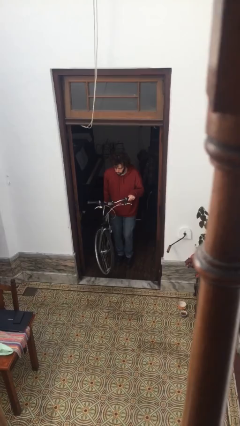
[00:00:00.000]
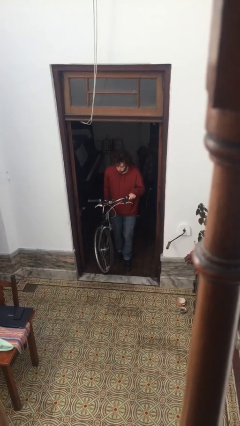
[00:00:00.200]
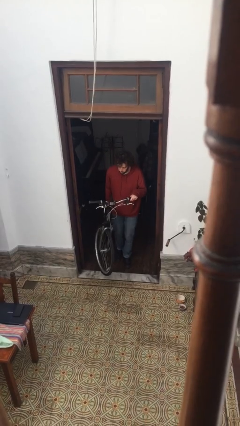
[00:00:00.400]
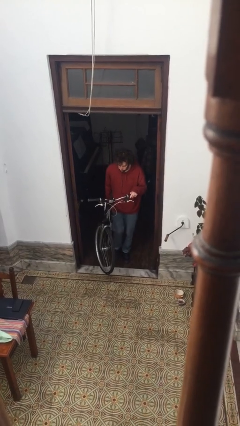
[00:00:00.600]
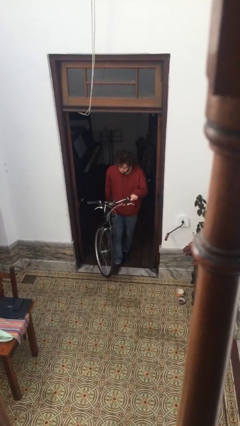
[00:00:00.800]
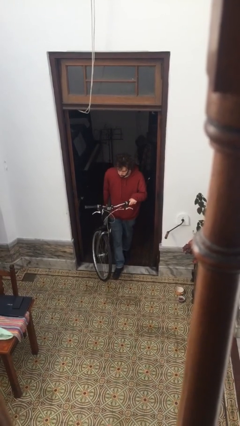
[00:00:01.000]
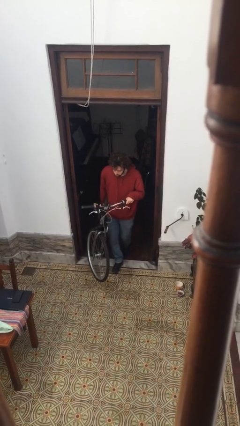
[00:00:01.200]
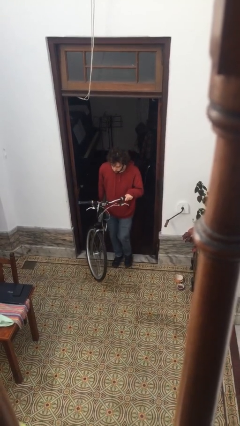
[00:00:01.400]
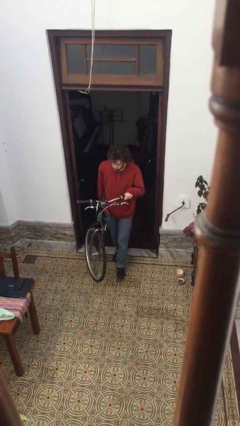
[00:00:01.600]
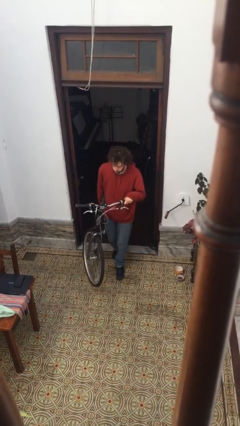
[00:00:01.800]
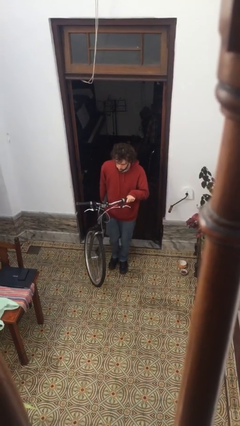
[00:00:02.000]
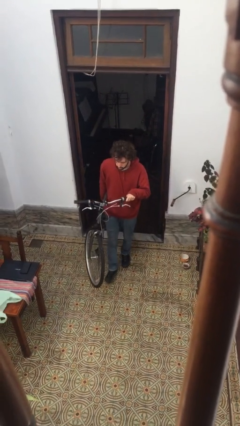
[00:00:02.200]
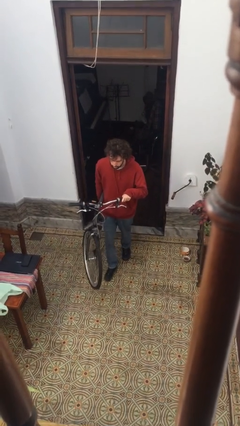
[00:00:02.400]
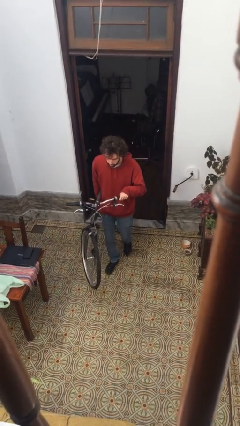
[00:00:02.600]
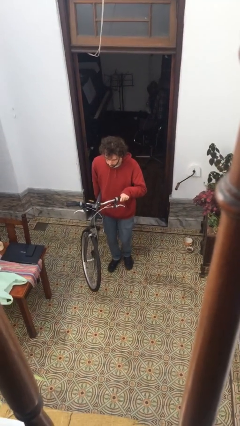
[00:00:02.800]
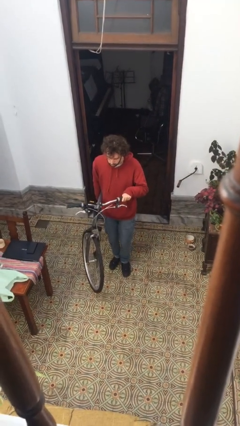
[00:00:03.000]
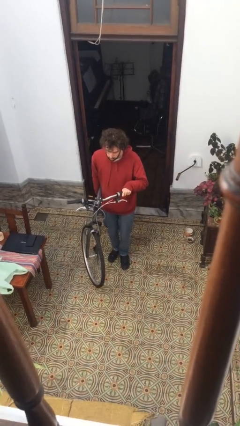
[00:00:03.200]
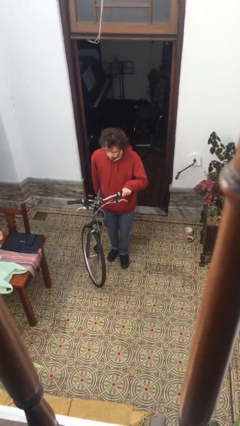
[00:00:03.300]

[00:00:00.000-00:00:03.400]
person carries bicycle

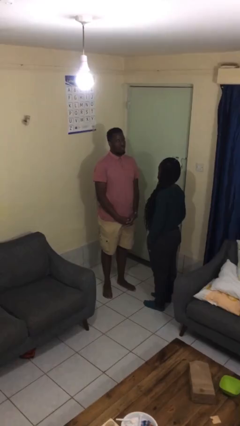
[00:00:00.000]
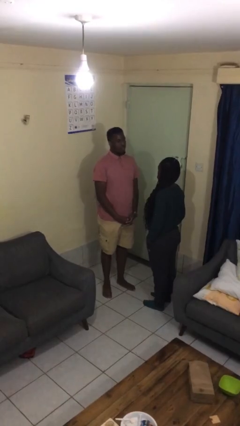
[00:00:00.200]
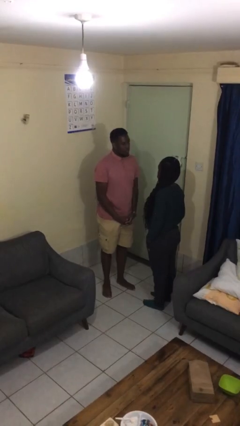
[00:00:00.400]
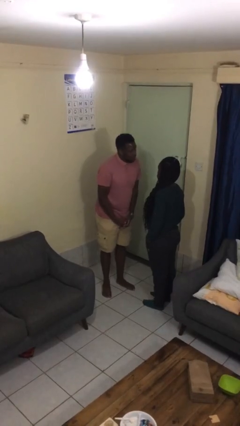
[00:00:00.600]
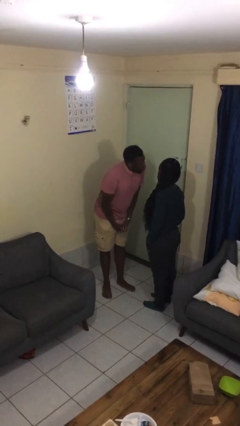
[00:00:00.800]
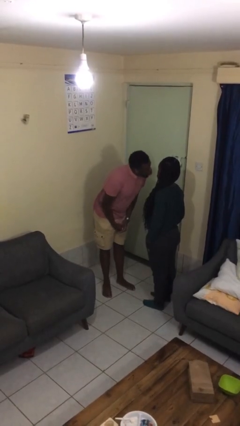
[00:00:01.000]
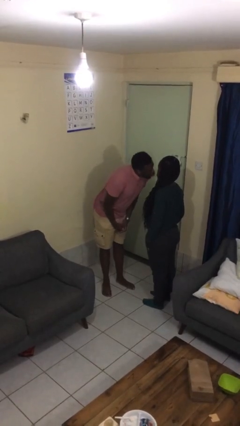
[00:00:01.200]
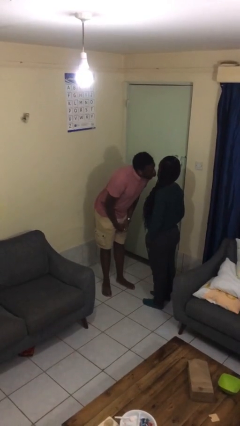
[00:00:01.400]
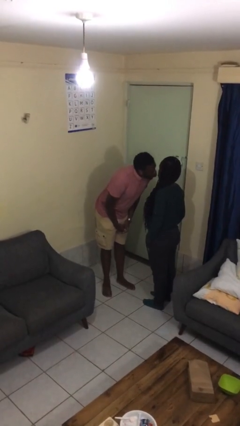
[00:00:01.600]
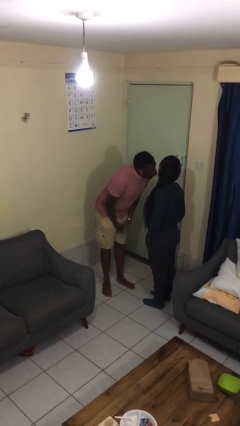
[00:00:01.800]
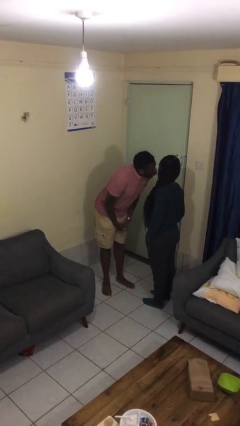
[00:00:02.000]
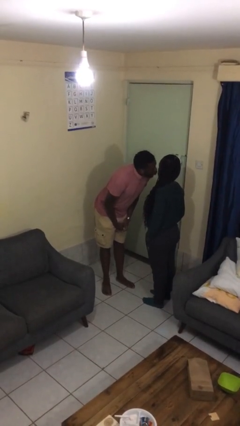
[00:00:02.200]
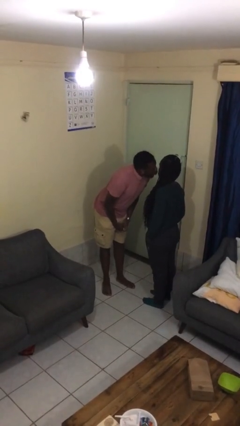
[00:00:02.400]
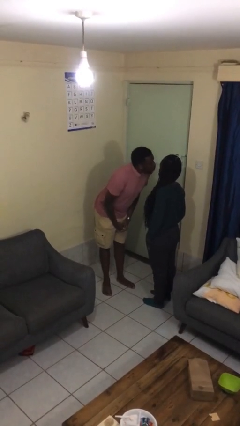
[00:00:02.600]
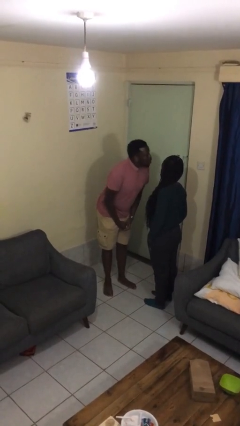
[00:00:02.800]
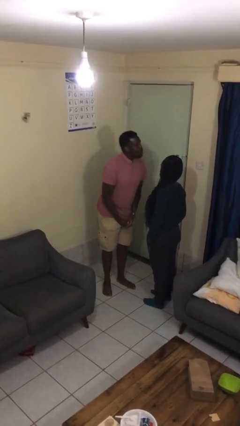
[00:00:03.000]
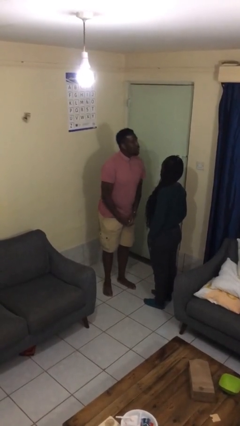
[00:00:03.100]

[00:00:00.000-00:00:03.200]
person kisses cheek of person

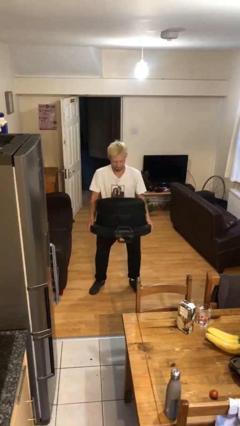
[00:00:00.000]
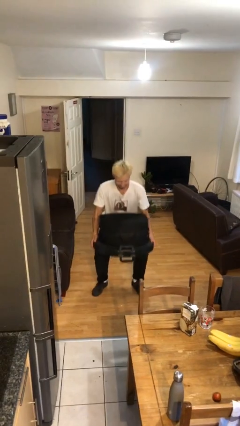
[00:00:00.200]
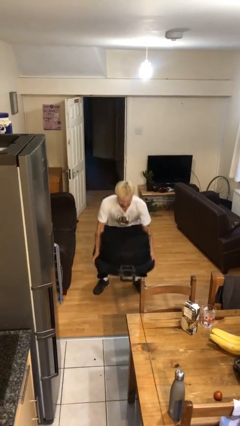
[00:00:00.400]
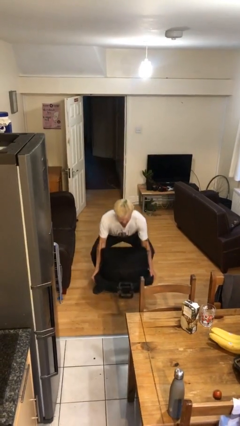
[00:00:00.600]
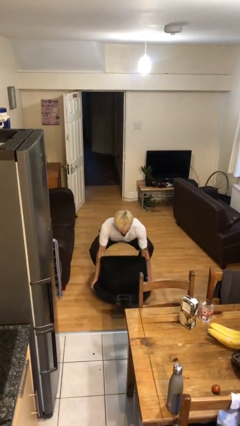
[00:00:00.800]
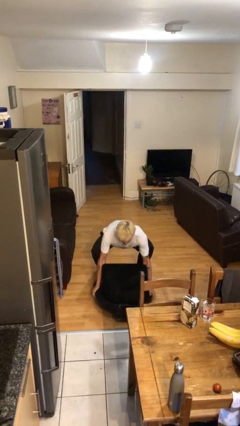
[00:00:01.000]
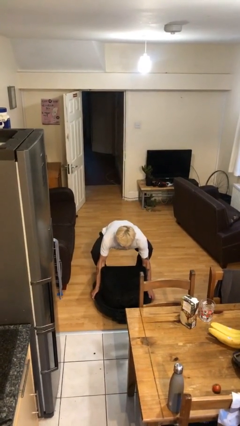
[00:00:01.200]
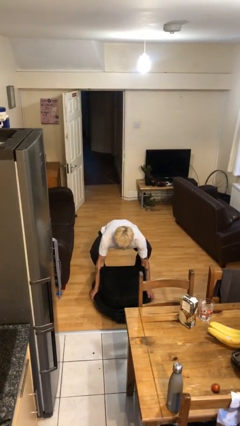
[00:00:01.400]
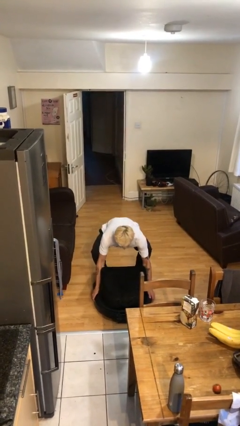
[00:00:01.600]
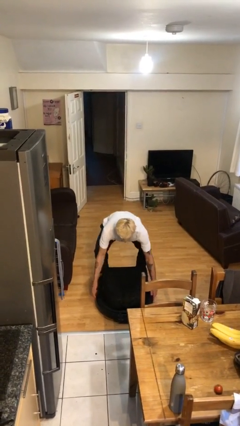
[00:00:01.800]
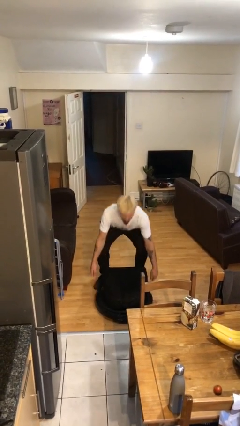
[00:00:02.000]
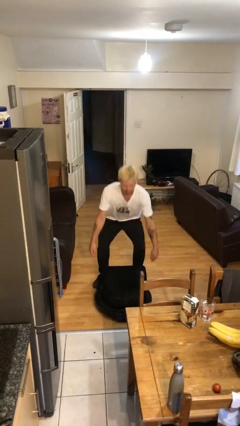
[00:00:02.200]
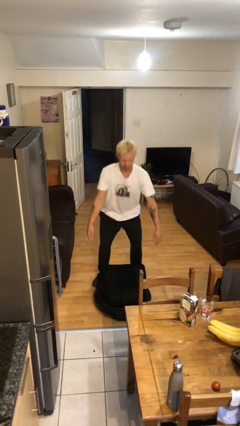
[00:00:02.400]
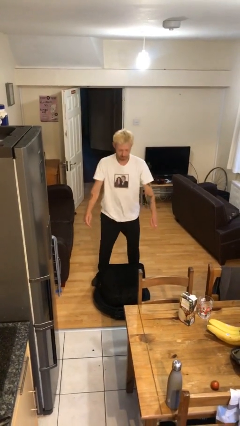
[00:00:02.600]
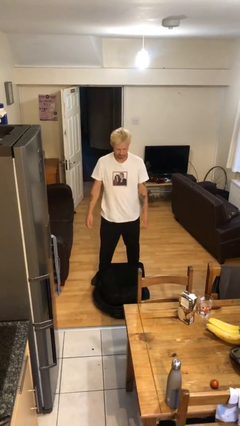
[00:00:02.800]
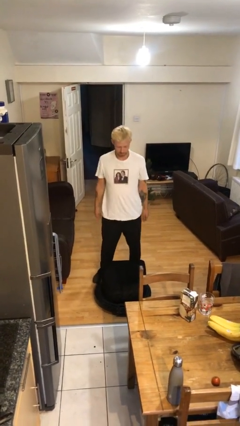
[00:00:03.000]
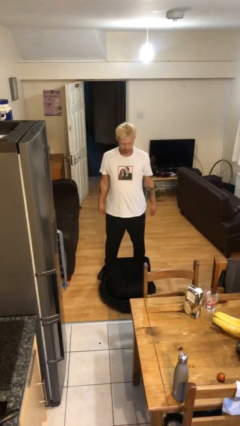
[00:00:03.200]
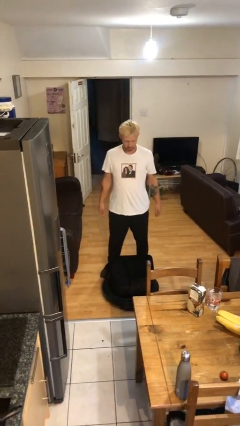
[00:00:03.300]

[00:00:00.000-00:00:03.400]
person puts down object on floor

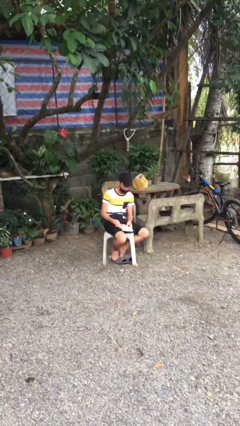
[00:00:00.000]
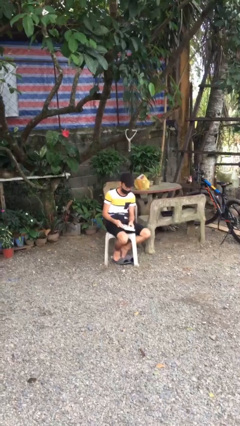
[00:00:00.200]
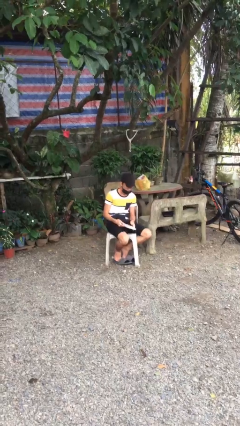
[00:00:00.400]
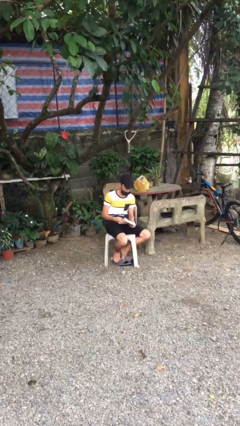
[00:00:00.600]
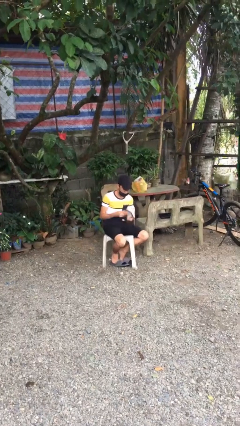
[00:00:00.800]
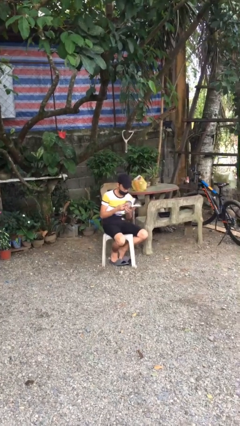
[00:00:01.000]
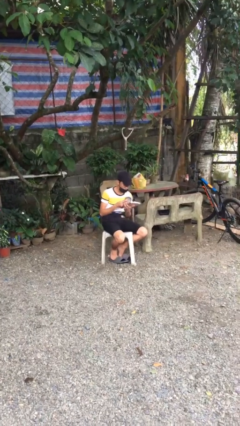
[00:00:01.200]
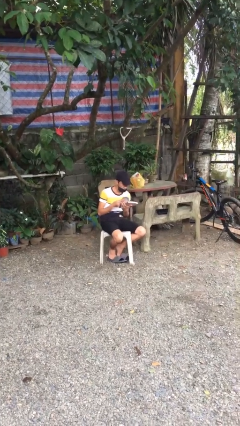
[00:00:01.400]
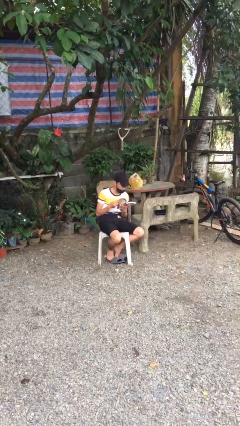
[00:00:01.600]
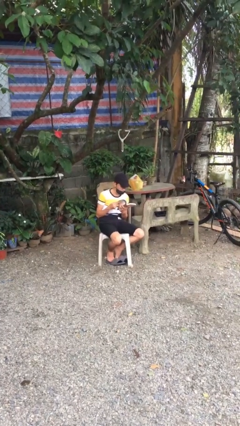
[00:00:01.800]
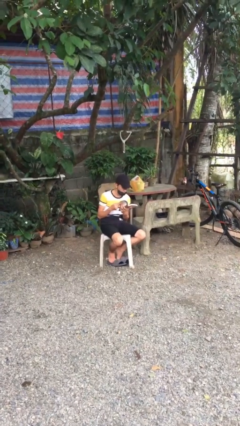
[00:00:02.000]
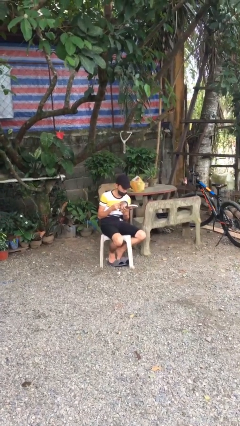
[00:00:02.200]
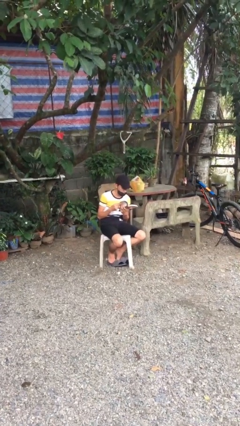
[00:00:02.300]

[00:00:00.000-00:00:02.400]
person reads document

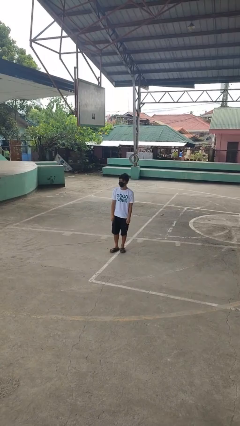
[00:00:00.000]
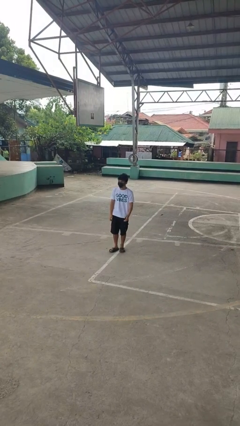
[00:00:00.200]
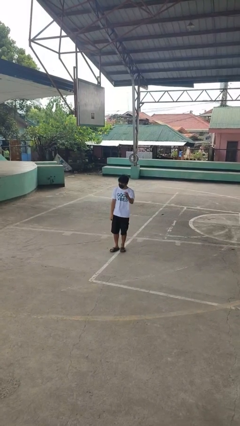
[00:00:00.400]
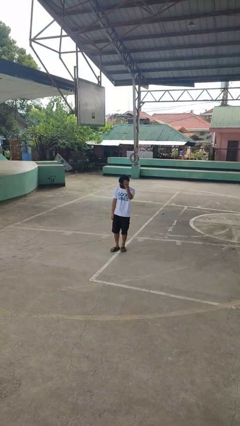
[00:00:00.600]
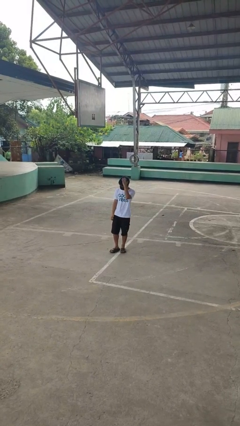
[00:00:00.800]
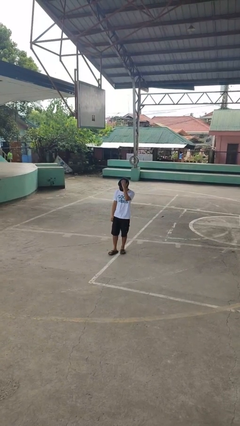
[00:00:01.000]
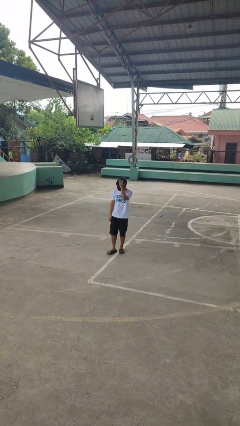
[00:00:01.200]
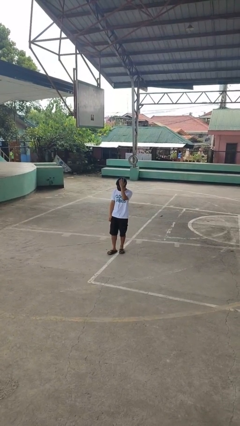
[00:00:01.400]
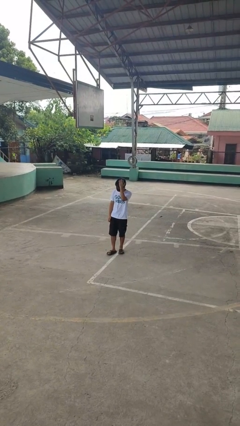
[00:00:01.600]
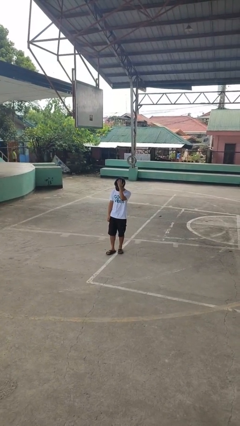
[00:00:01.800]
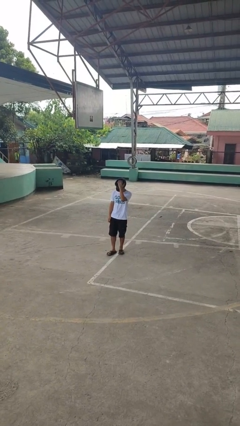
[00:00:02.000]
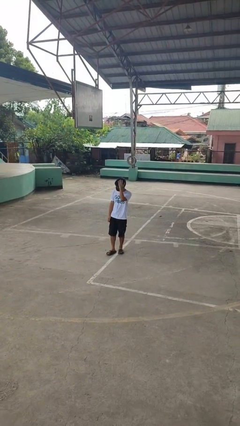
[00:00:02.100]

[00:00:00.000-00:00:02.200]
person pats head

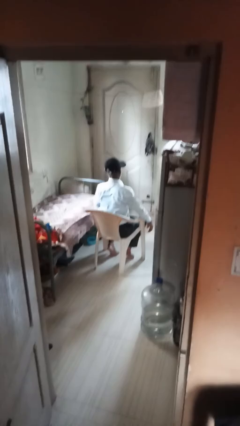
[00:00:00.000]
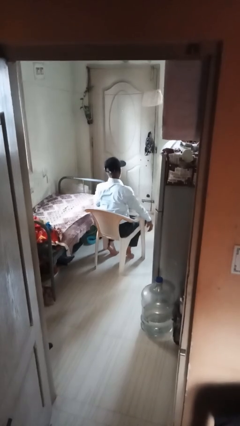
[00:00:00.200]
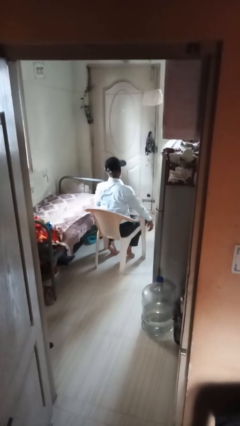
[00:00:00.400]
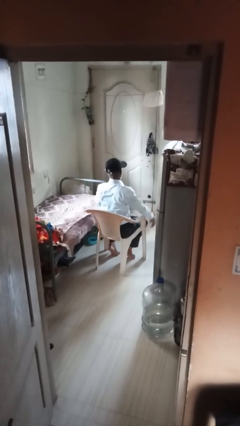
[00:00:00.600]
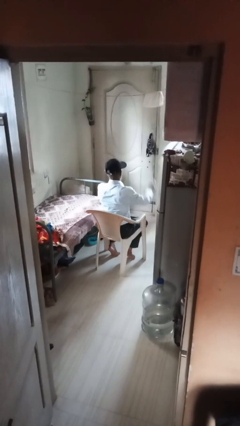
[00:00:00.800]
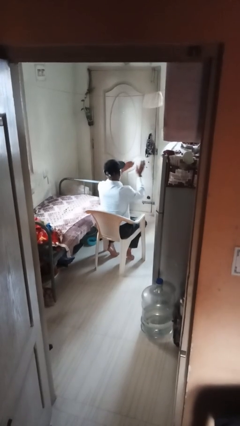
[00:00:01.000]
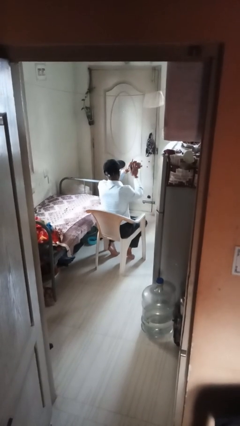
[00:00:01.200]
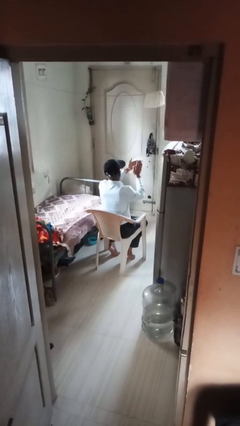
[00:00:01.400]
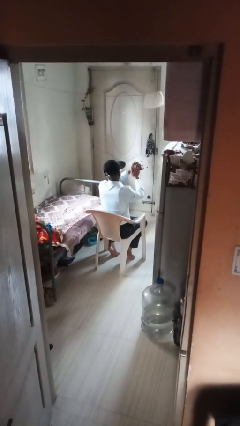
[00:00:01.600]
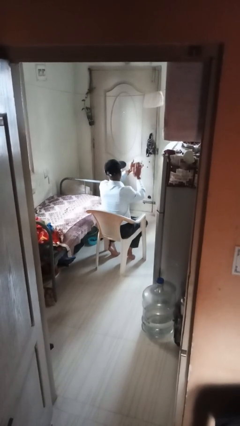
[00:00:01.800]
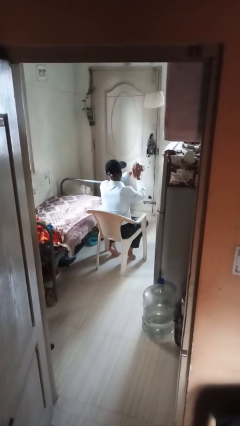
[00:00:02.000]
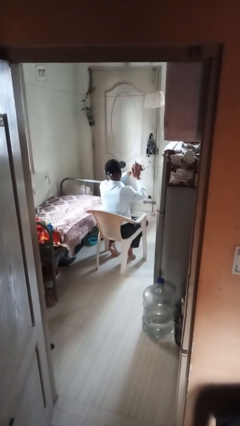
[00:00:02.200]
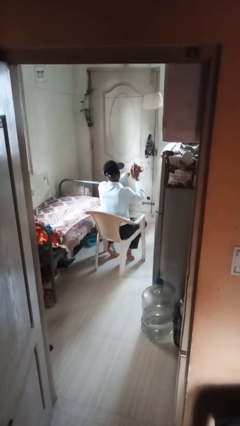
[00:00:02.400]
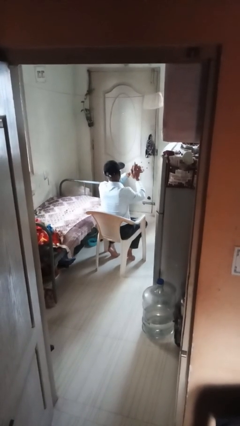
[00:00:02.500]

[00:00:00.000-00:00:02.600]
person claps hands
